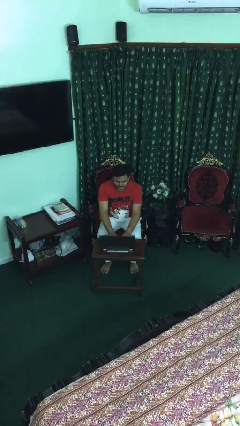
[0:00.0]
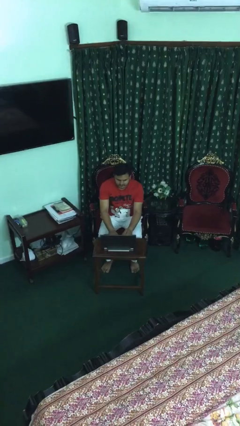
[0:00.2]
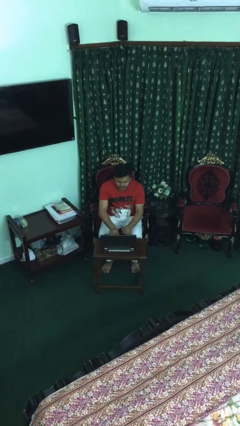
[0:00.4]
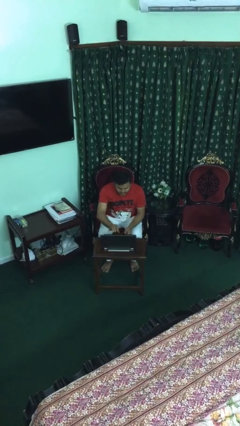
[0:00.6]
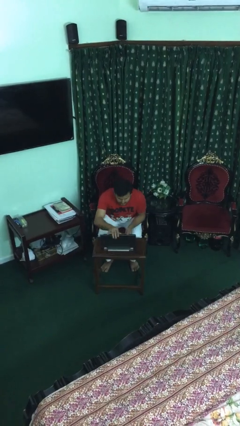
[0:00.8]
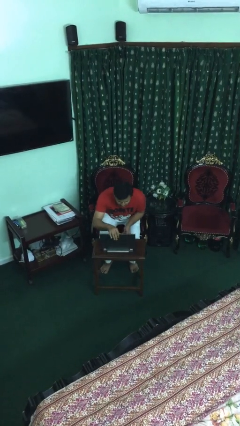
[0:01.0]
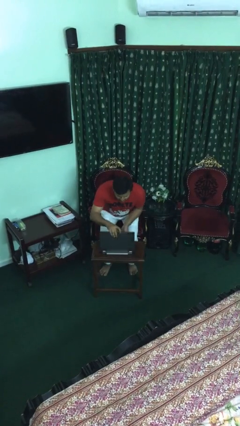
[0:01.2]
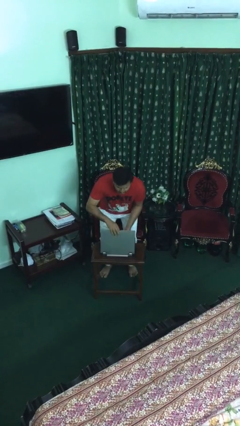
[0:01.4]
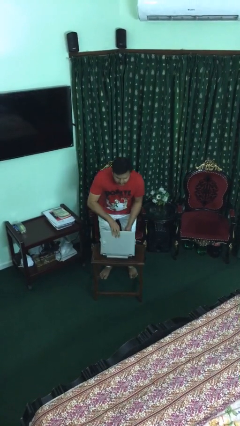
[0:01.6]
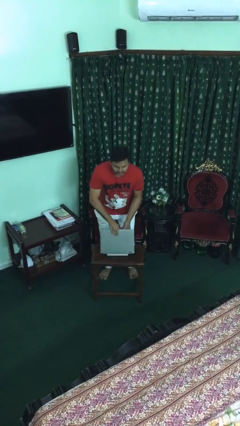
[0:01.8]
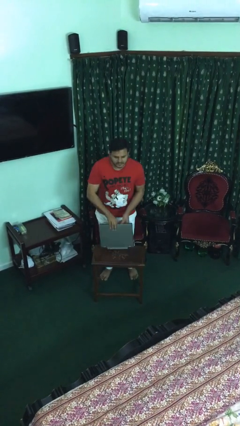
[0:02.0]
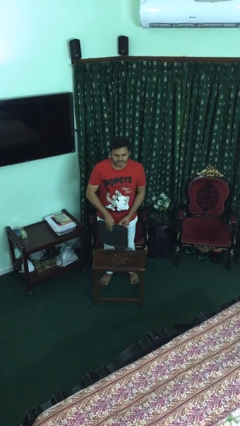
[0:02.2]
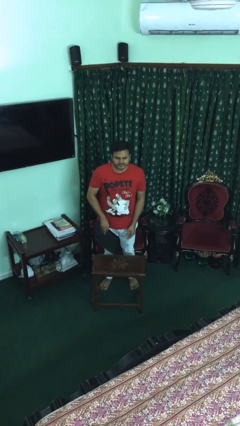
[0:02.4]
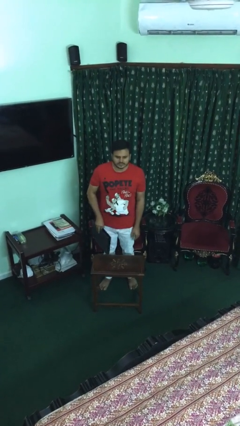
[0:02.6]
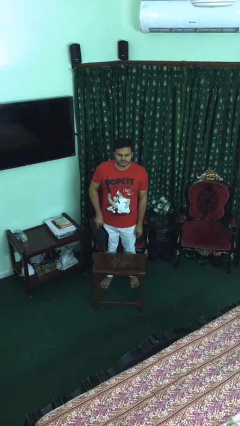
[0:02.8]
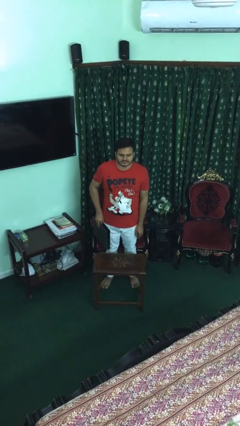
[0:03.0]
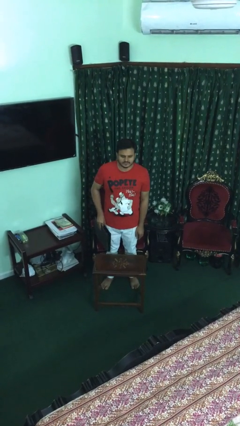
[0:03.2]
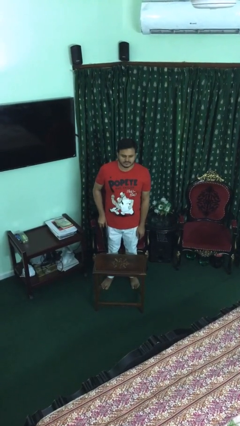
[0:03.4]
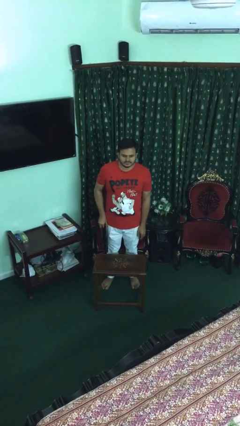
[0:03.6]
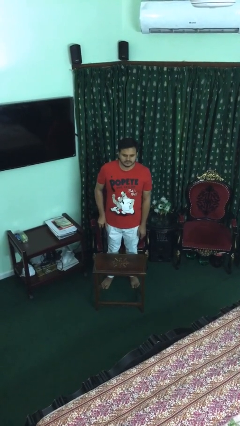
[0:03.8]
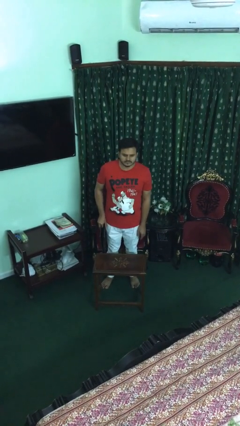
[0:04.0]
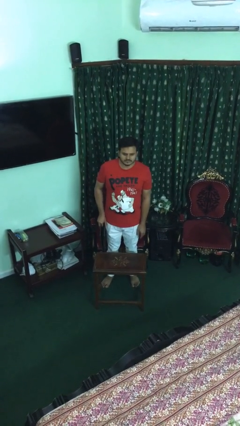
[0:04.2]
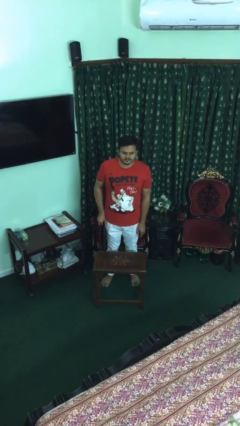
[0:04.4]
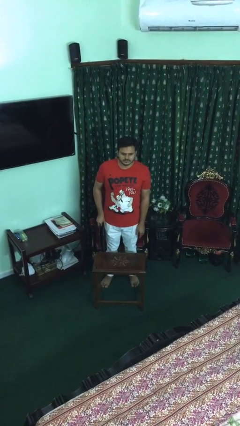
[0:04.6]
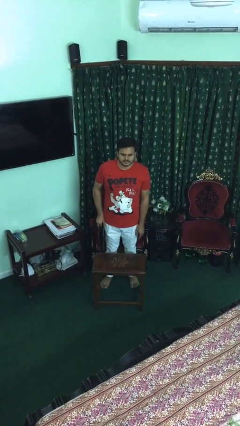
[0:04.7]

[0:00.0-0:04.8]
person stands up

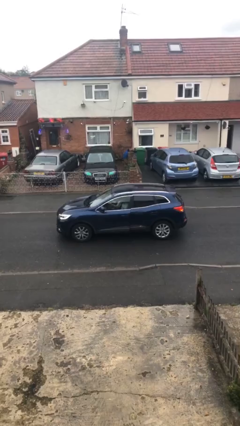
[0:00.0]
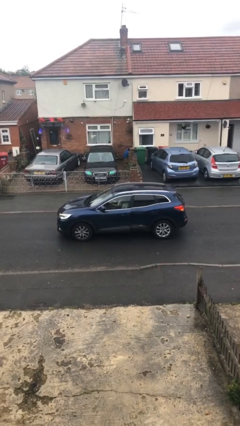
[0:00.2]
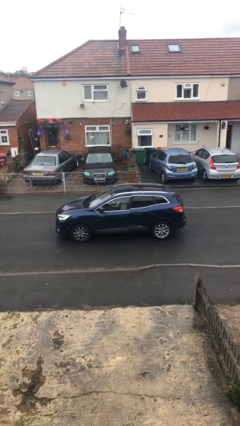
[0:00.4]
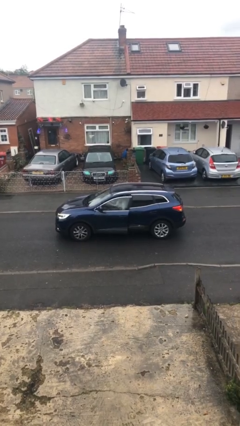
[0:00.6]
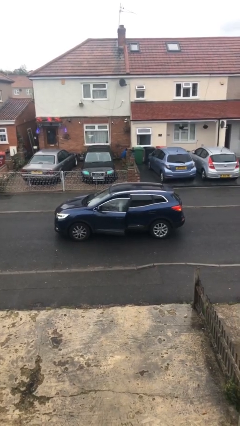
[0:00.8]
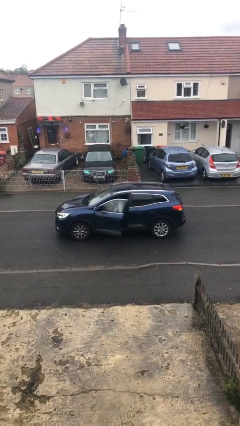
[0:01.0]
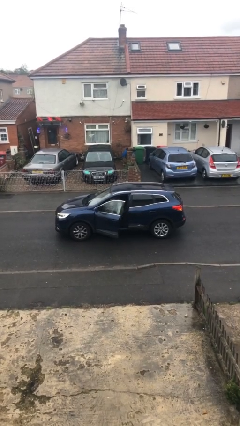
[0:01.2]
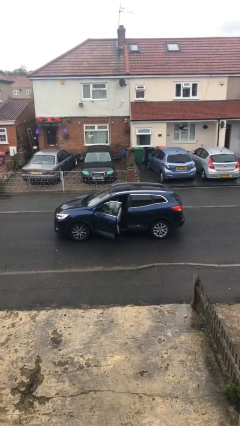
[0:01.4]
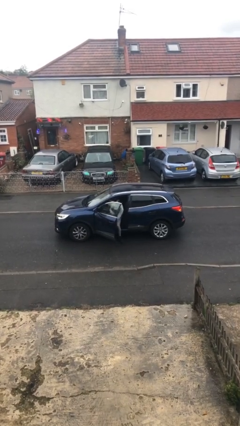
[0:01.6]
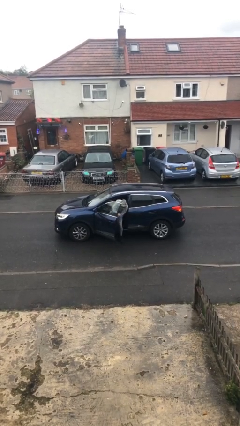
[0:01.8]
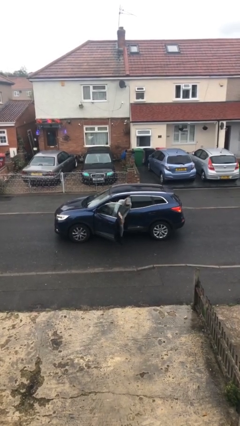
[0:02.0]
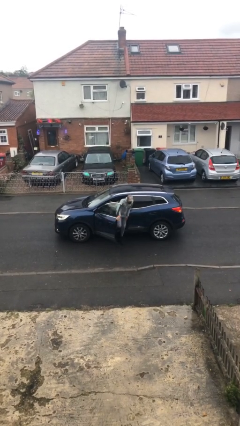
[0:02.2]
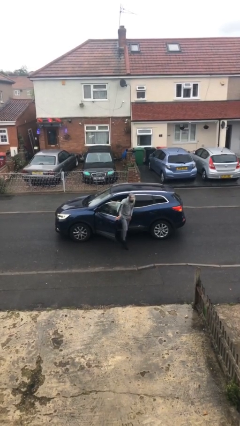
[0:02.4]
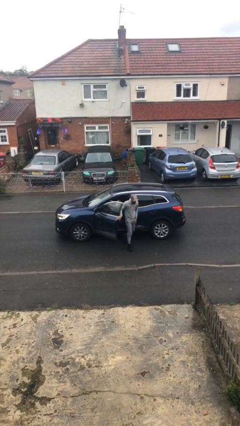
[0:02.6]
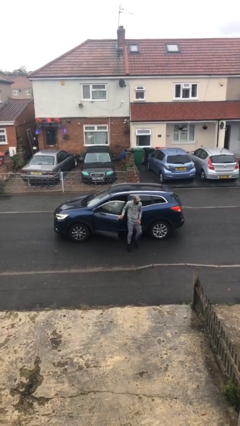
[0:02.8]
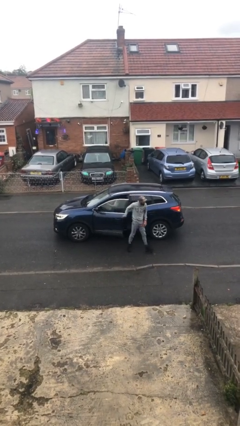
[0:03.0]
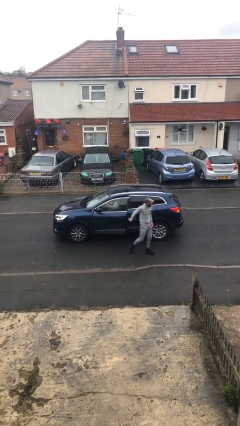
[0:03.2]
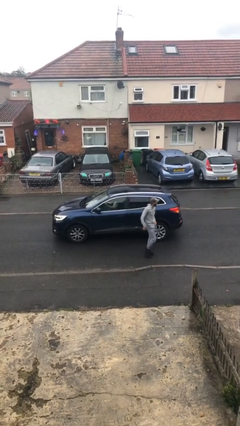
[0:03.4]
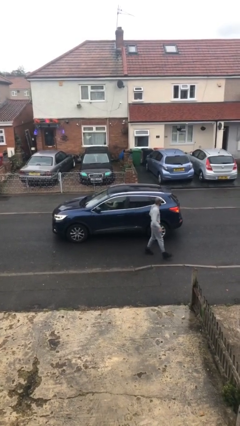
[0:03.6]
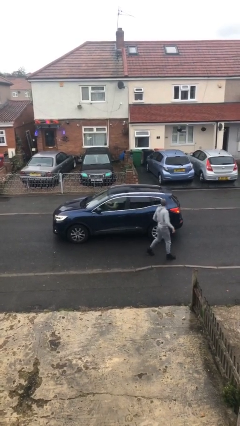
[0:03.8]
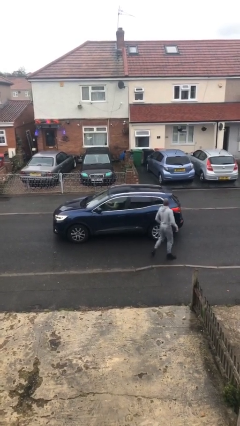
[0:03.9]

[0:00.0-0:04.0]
car drops off person

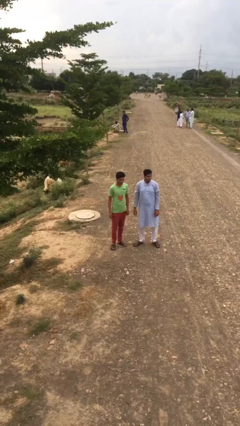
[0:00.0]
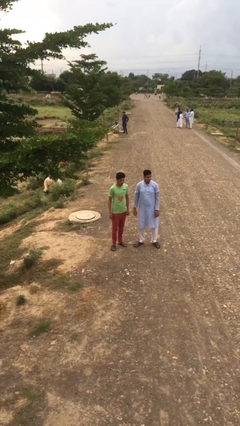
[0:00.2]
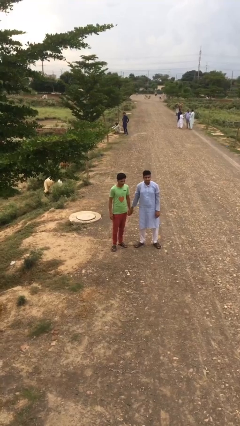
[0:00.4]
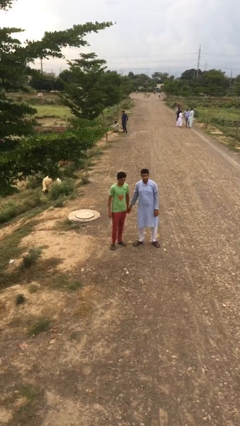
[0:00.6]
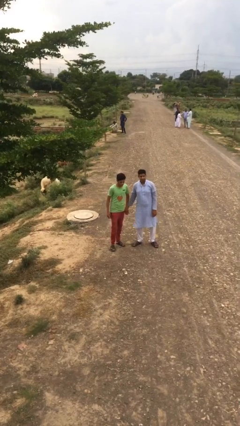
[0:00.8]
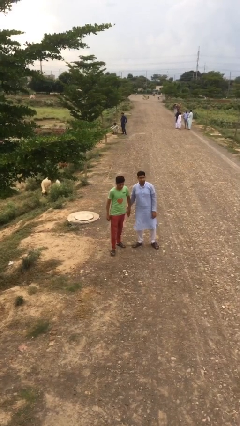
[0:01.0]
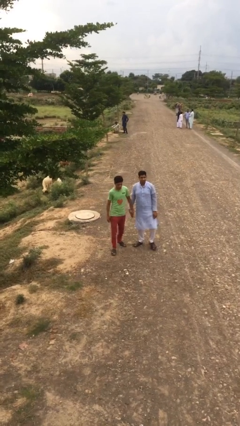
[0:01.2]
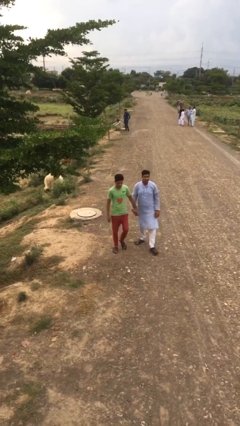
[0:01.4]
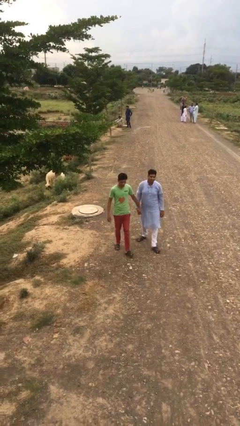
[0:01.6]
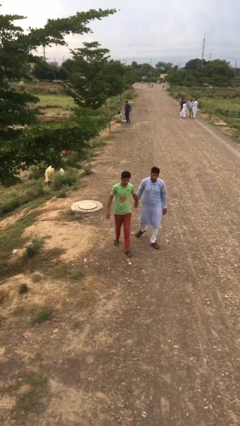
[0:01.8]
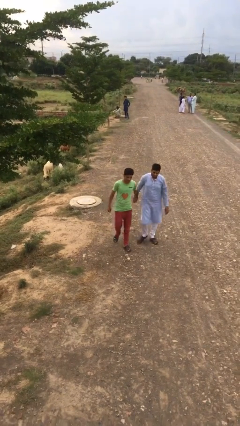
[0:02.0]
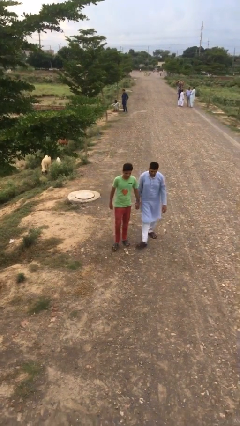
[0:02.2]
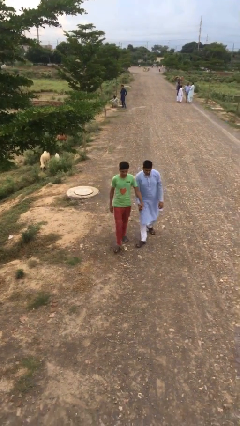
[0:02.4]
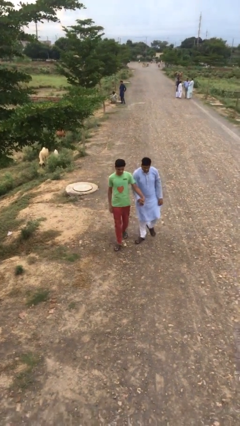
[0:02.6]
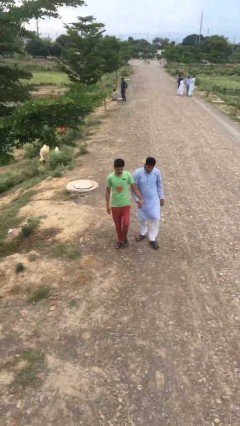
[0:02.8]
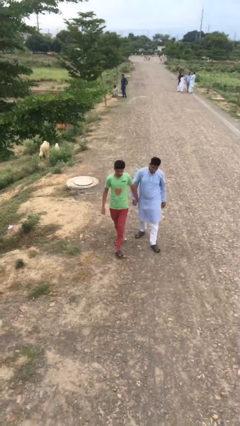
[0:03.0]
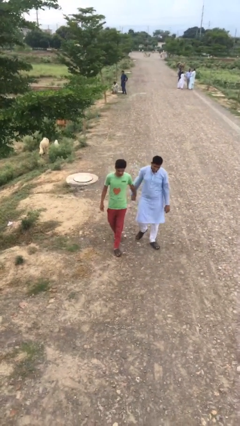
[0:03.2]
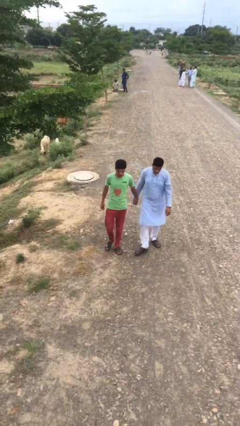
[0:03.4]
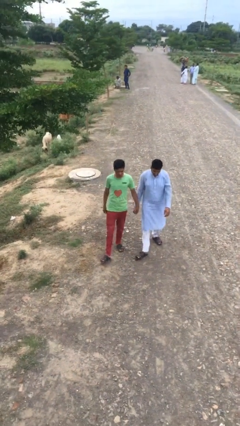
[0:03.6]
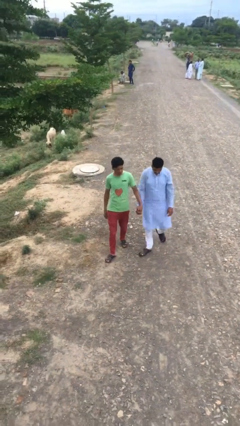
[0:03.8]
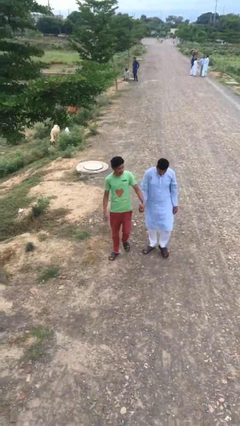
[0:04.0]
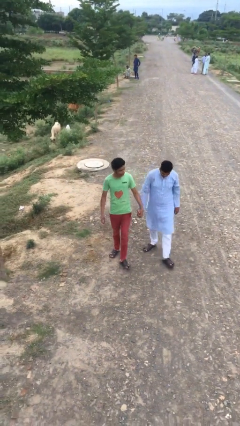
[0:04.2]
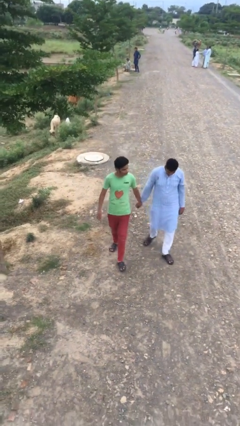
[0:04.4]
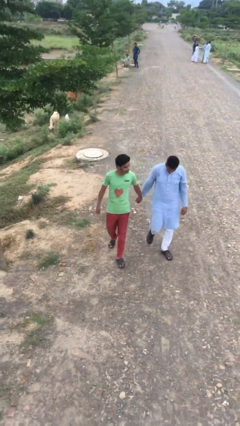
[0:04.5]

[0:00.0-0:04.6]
person holds hand

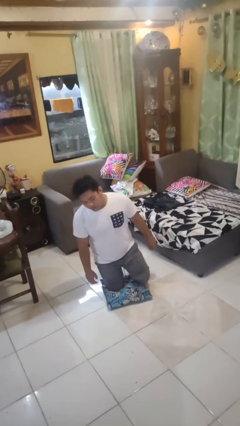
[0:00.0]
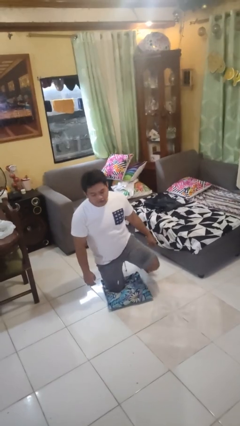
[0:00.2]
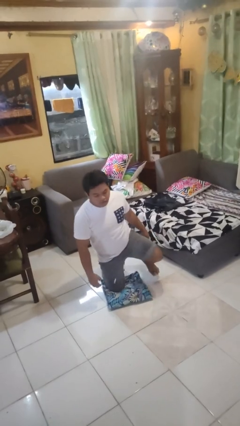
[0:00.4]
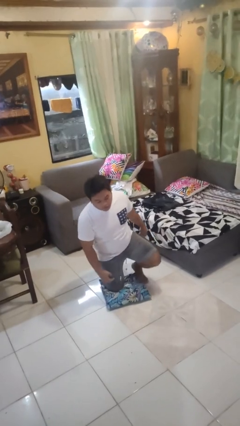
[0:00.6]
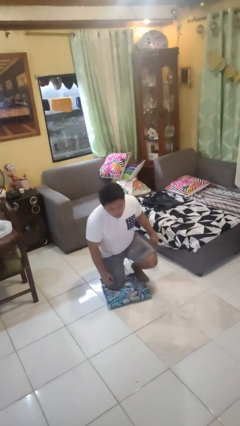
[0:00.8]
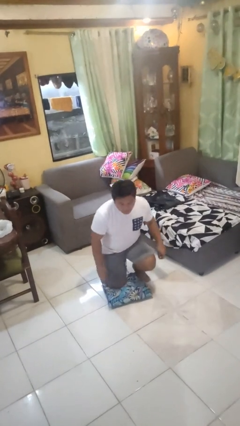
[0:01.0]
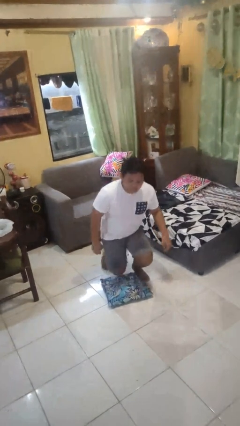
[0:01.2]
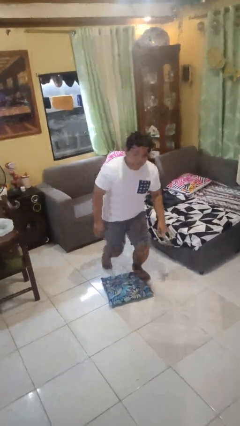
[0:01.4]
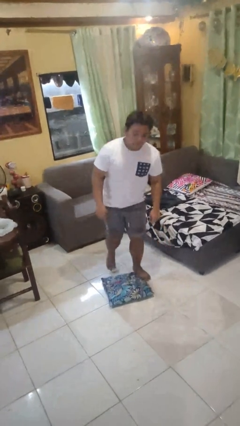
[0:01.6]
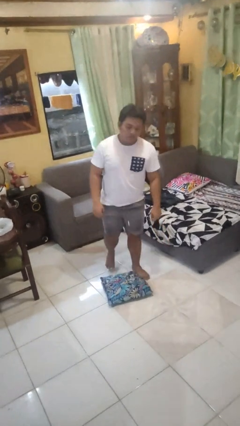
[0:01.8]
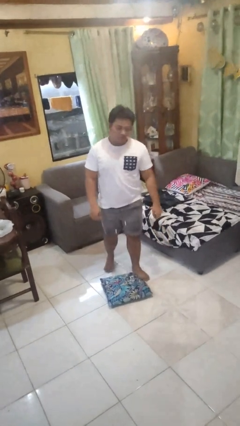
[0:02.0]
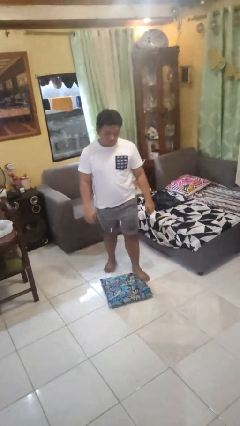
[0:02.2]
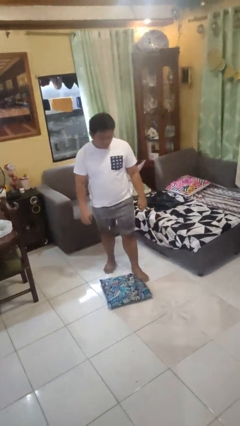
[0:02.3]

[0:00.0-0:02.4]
person stands up from floor

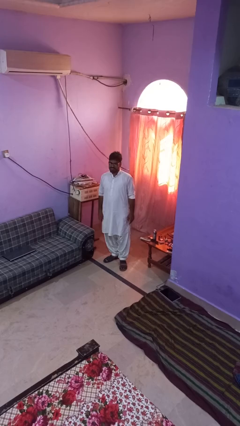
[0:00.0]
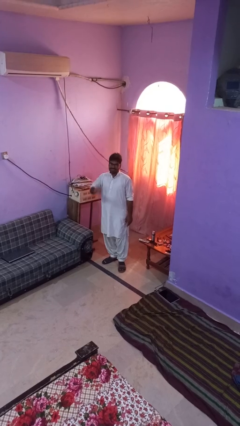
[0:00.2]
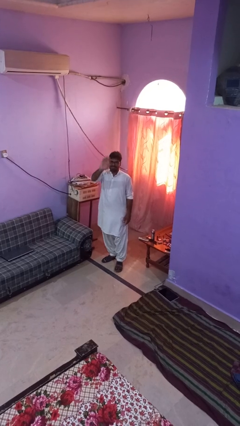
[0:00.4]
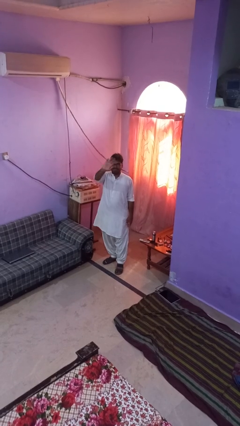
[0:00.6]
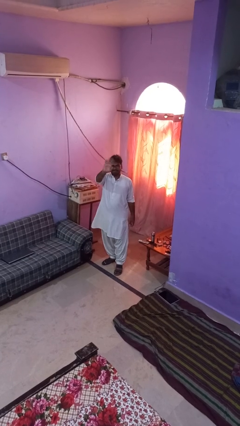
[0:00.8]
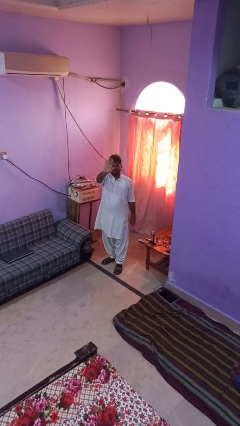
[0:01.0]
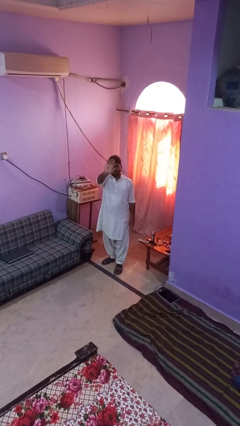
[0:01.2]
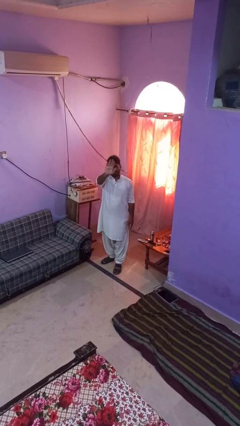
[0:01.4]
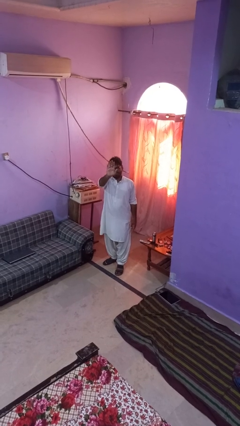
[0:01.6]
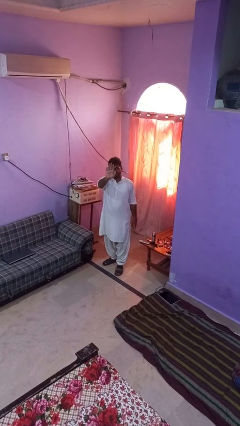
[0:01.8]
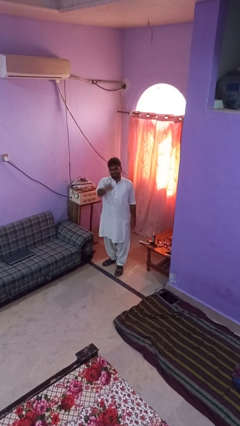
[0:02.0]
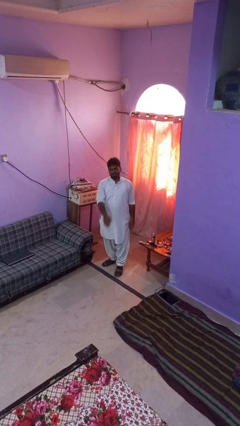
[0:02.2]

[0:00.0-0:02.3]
person waves at person
